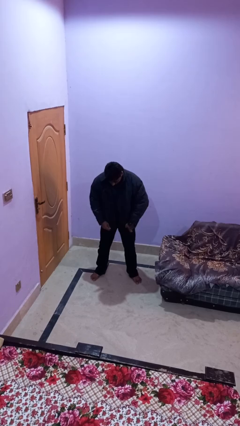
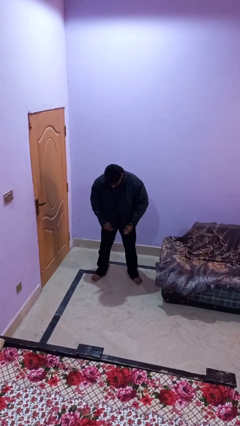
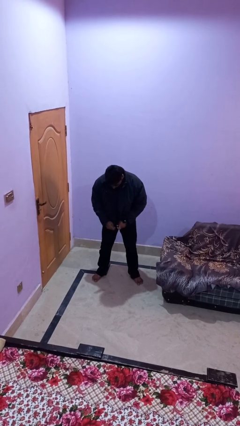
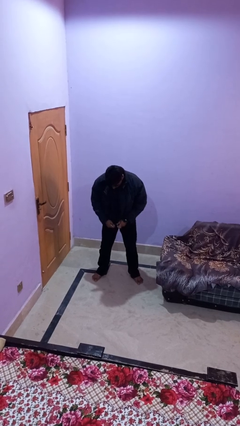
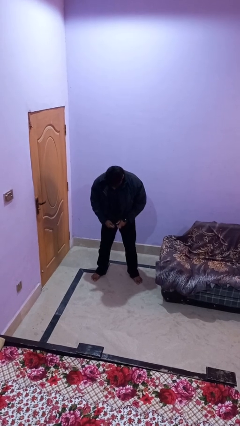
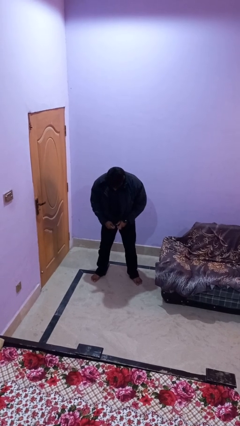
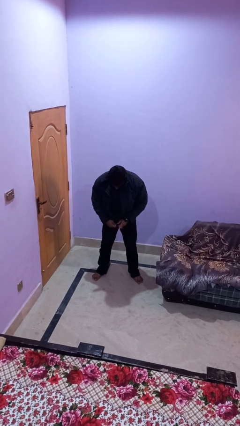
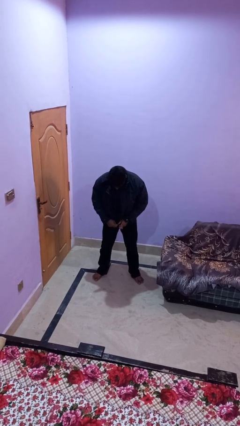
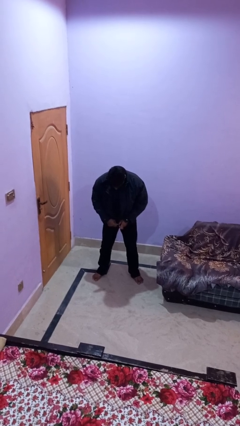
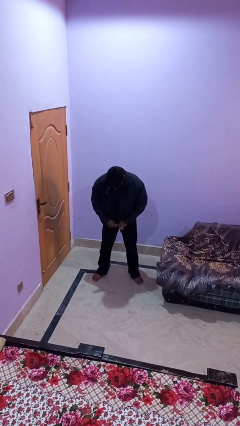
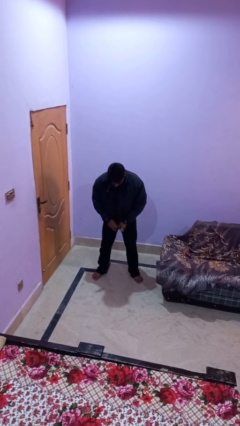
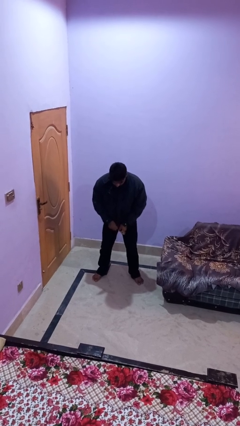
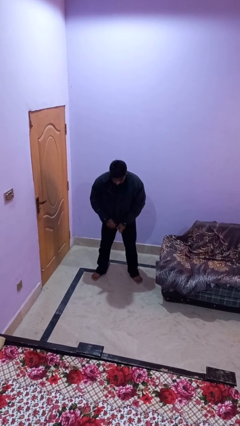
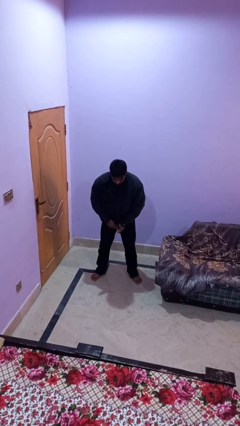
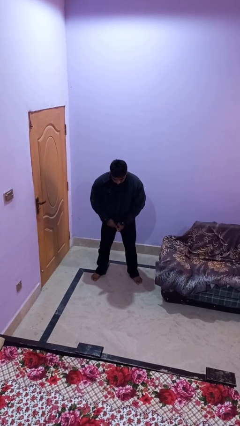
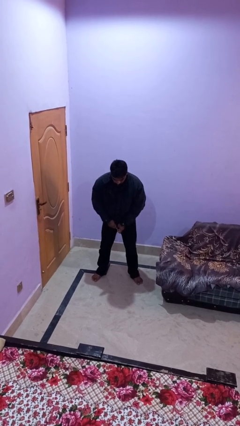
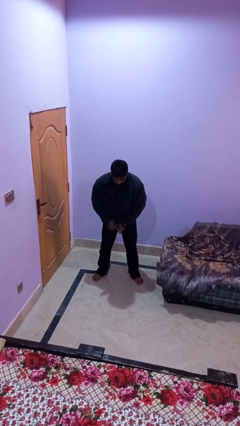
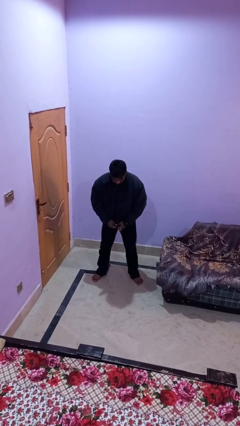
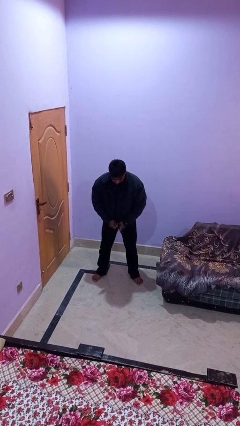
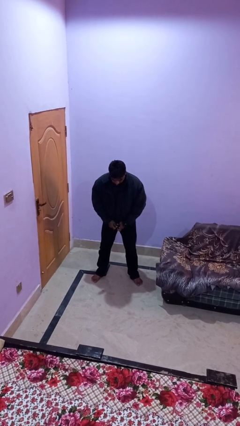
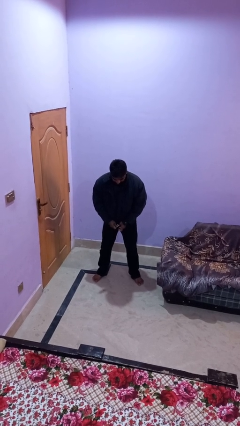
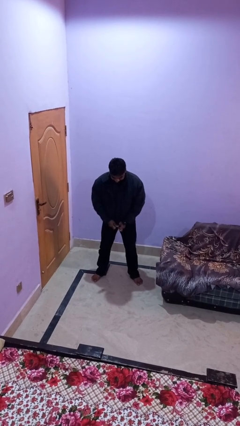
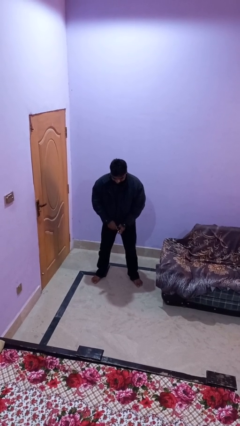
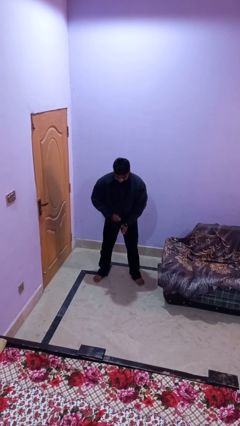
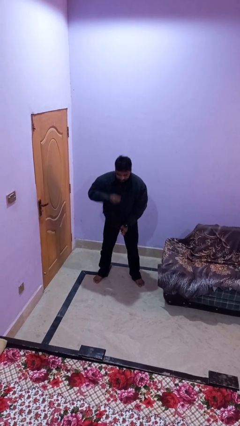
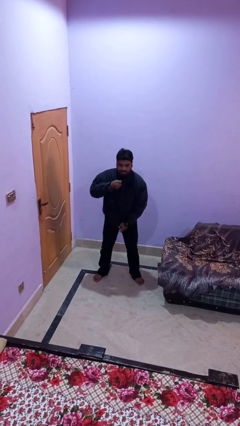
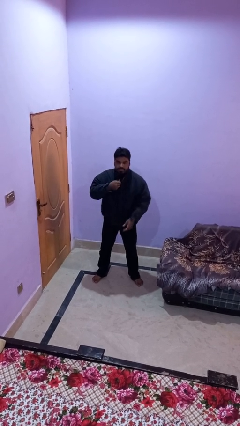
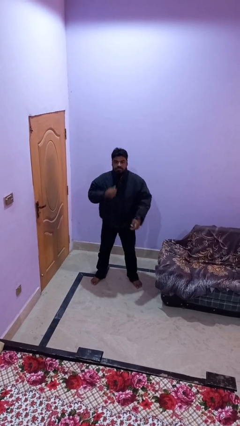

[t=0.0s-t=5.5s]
person zips up jacket

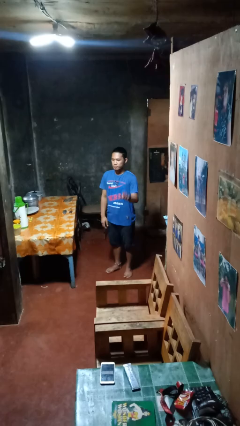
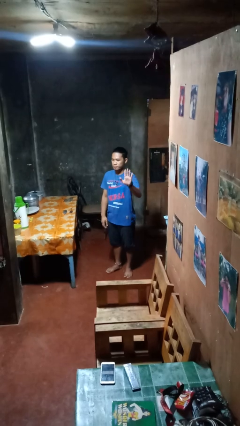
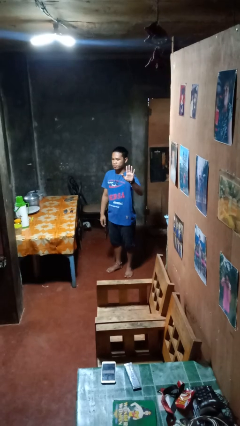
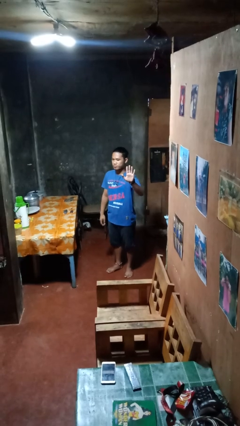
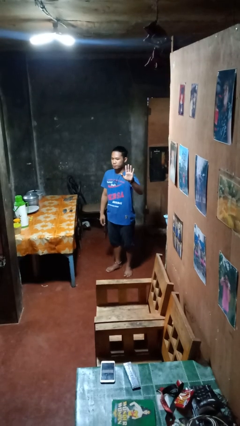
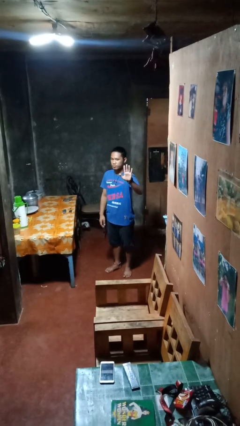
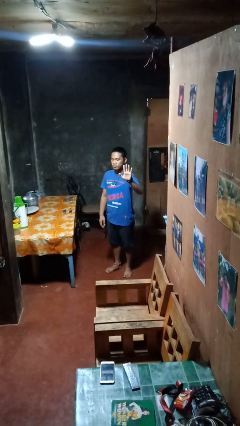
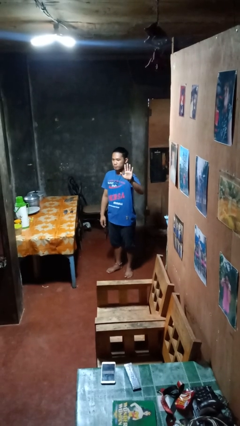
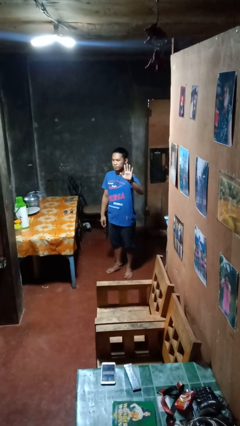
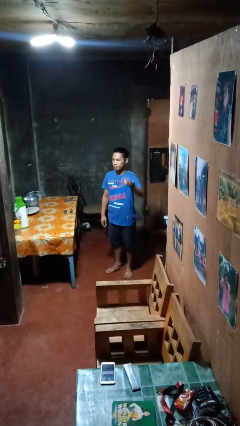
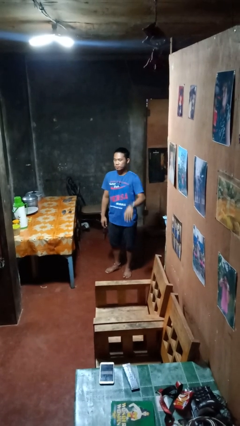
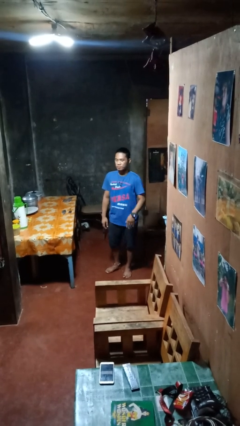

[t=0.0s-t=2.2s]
person gestures number five

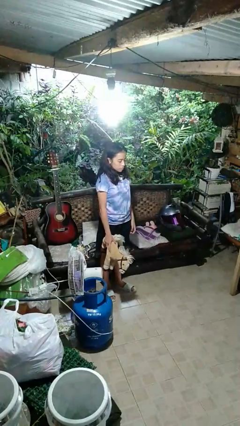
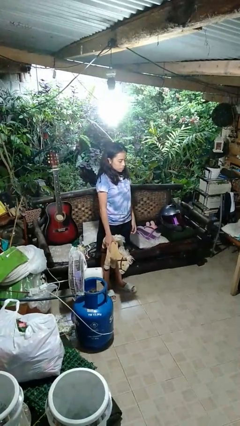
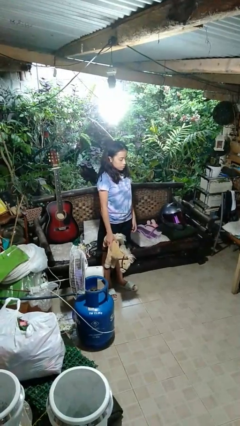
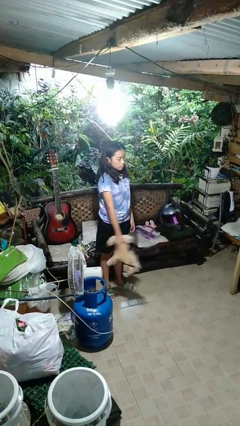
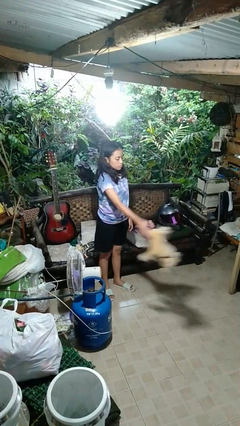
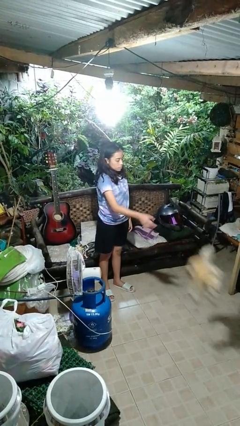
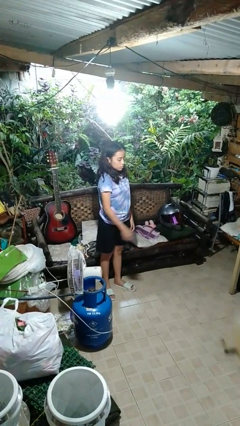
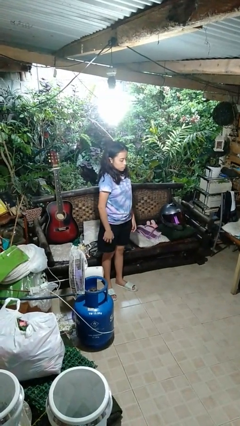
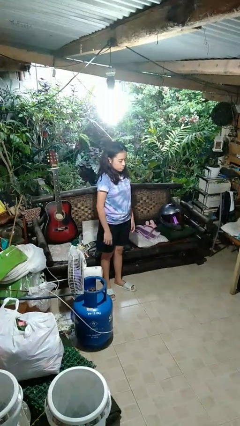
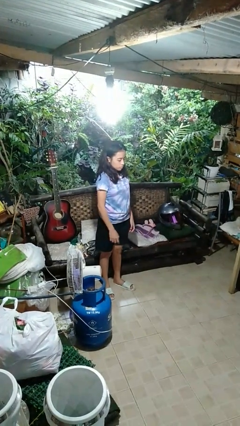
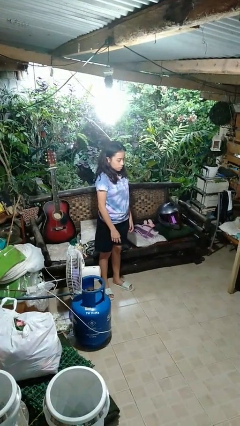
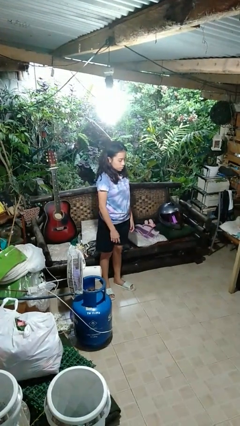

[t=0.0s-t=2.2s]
person throws object to ground

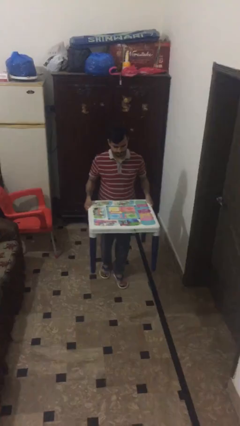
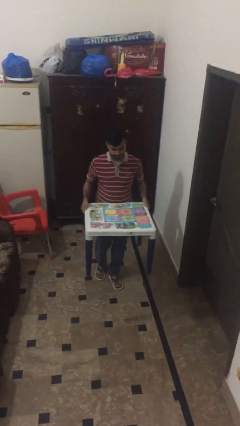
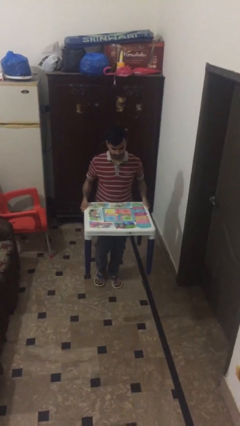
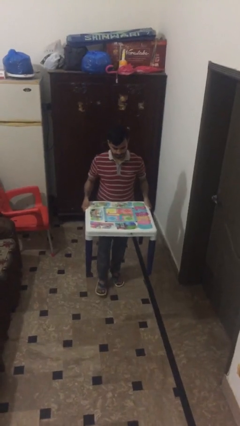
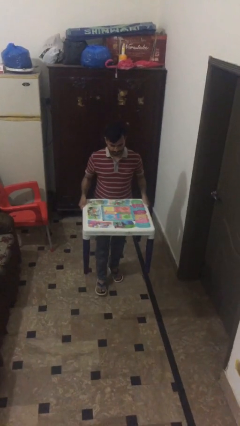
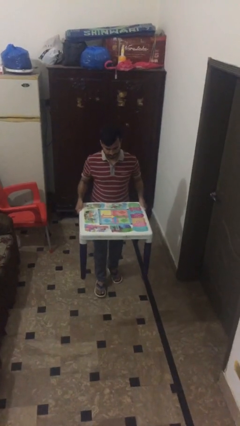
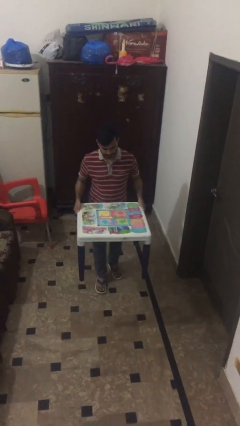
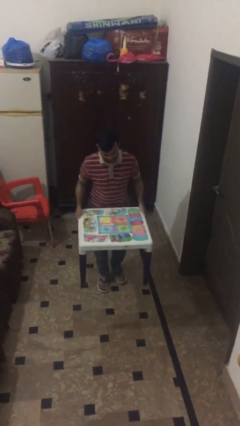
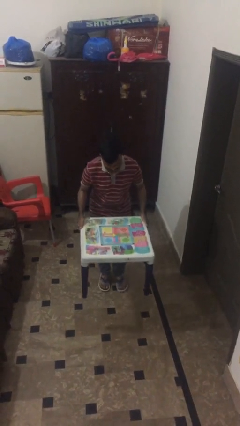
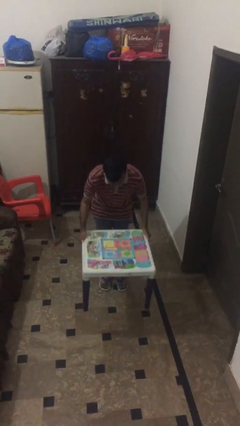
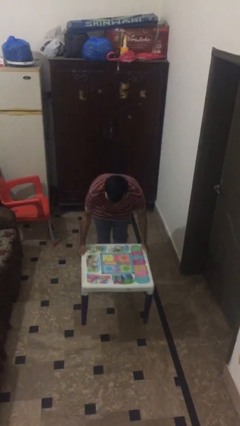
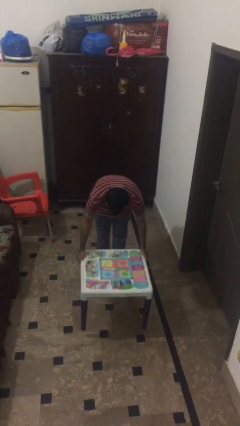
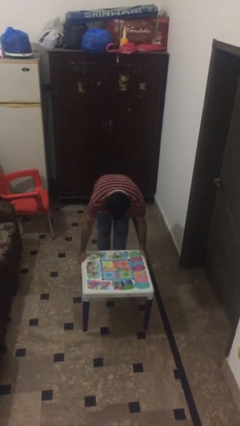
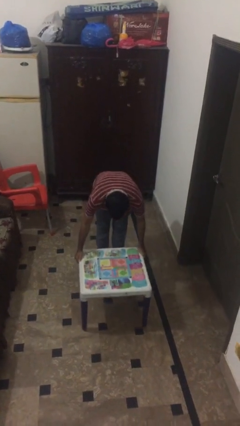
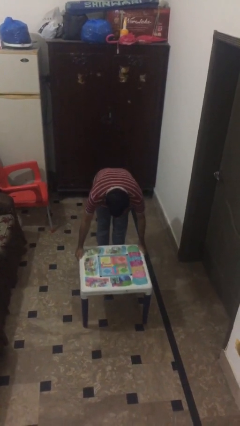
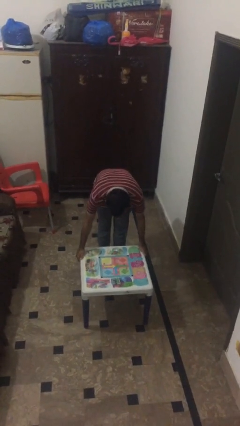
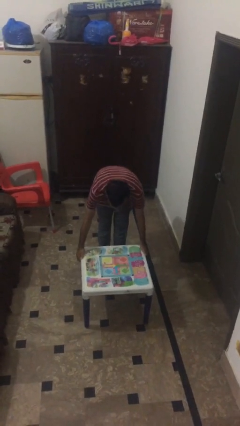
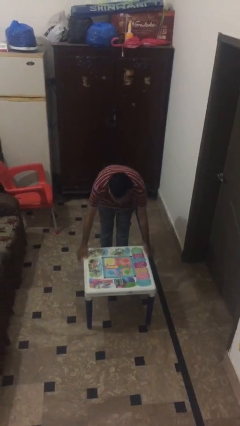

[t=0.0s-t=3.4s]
person puts down object on floor

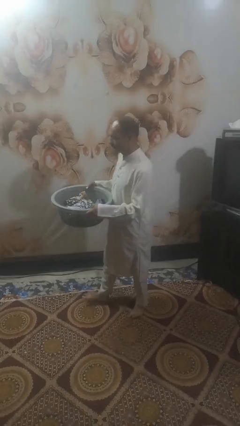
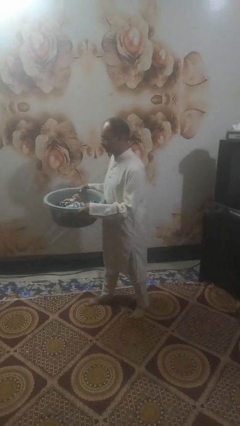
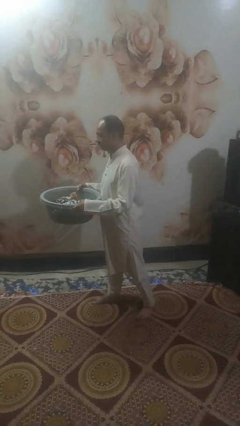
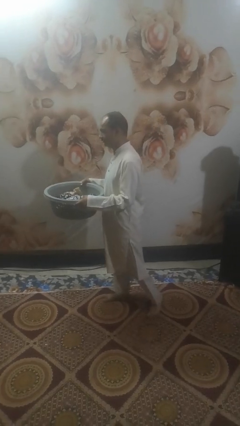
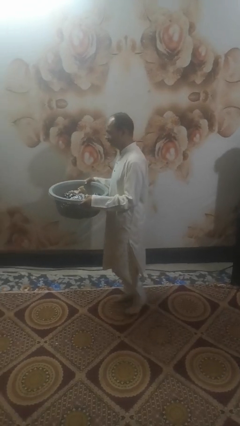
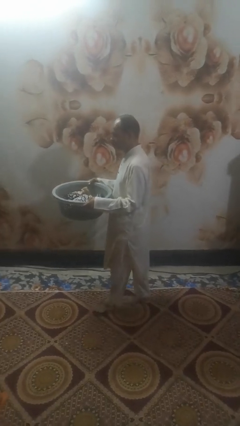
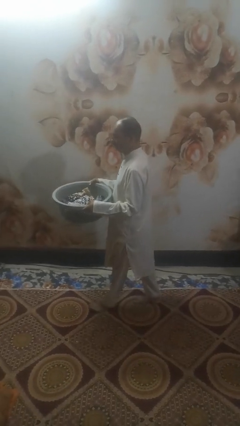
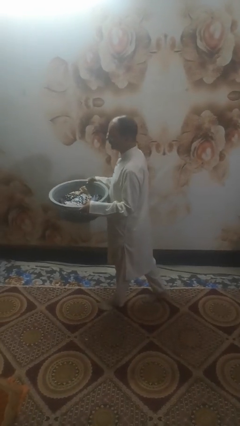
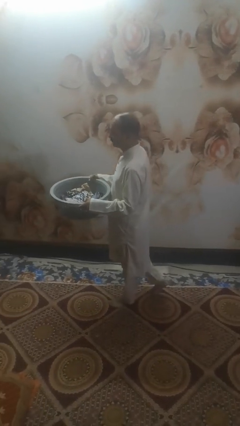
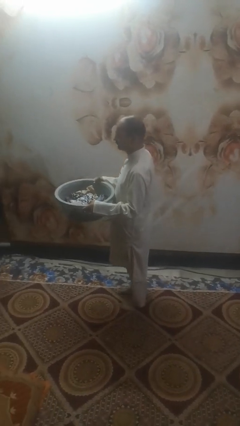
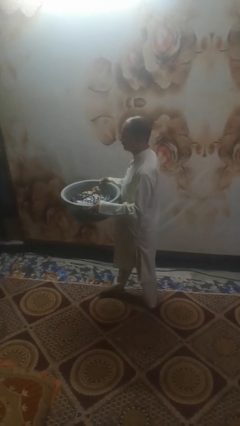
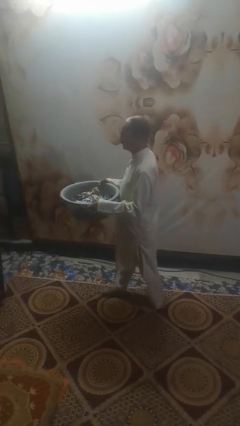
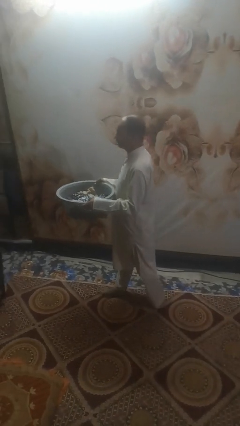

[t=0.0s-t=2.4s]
person carries laundry basket

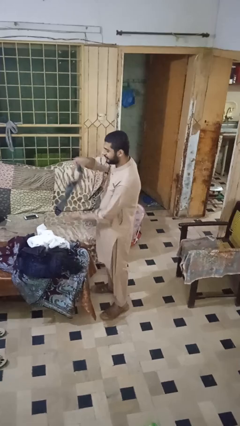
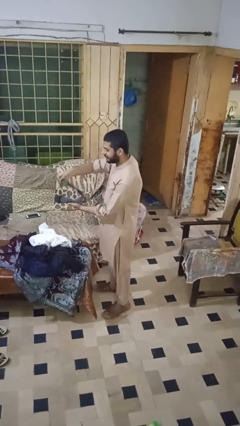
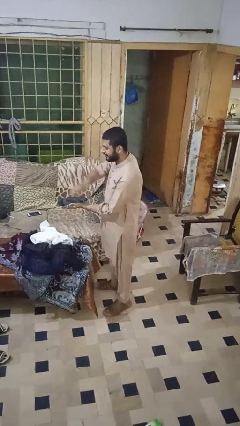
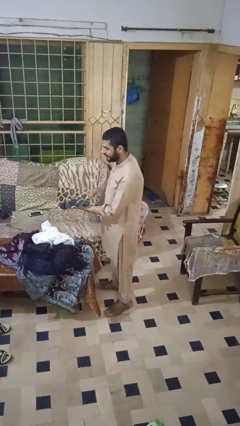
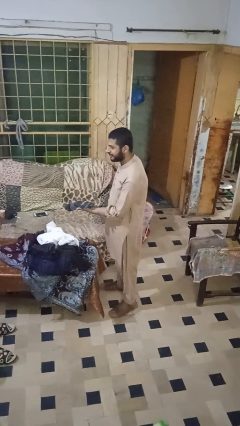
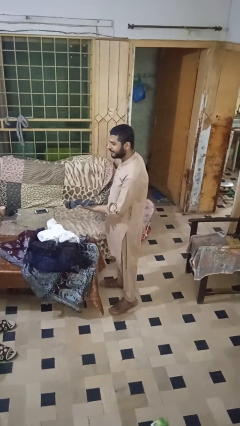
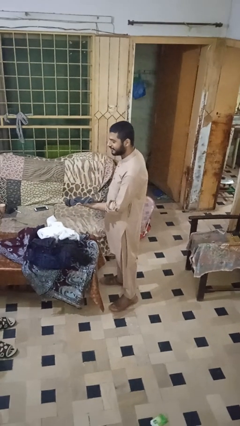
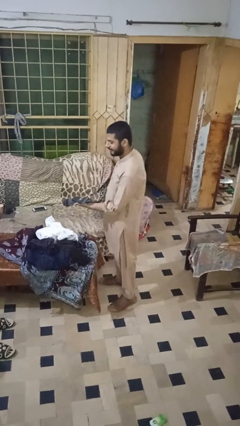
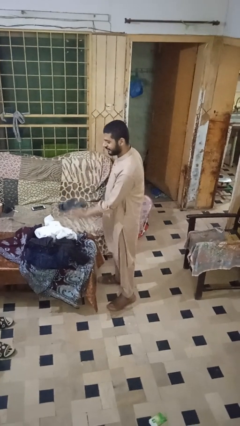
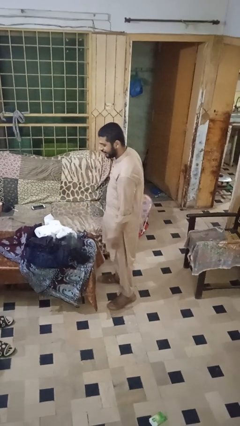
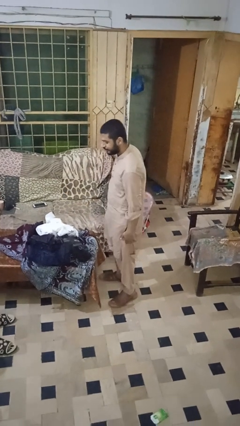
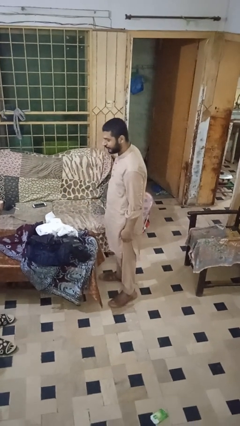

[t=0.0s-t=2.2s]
person folds socks
